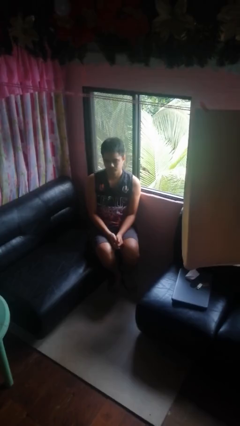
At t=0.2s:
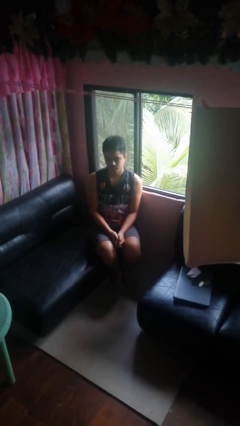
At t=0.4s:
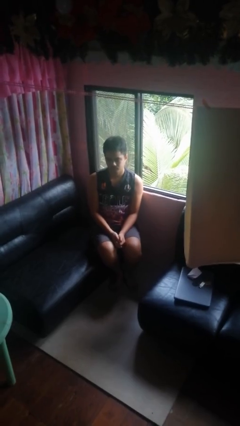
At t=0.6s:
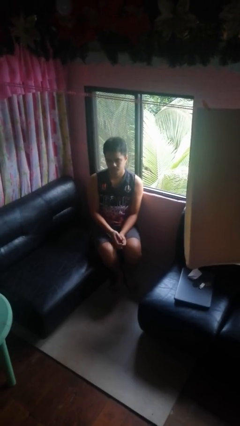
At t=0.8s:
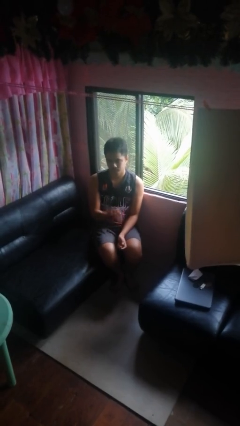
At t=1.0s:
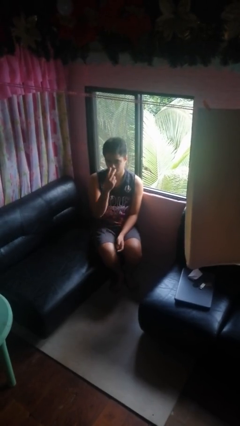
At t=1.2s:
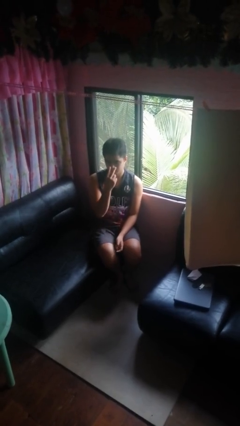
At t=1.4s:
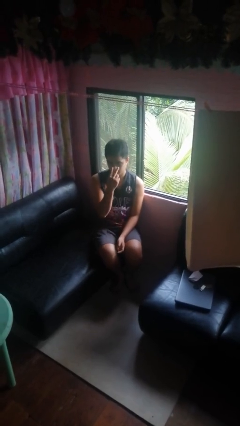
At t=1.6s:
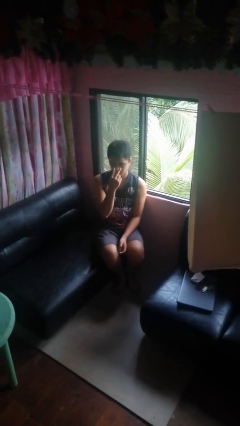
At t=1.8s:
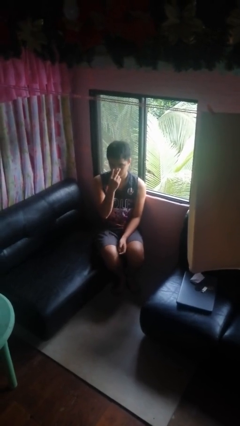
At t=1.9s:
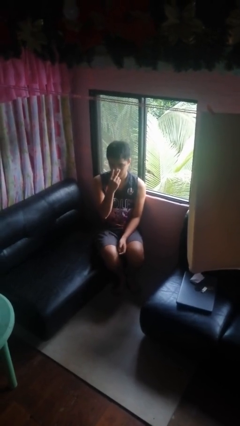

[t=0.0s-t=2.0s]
person gestures watch closely

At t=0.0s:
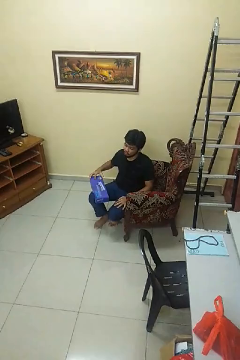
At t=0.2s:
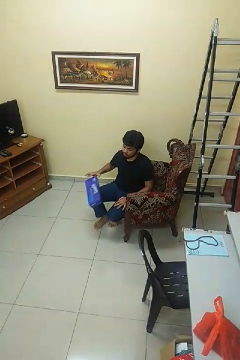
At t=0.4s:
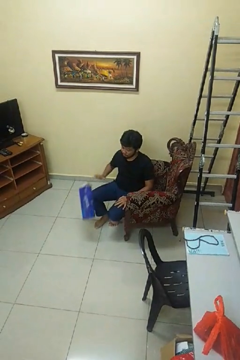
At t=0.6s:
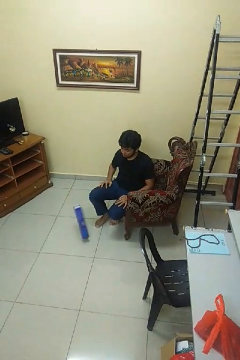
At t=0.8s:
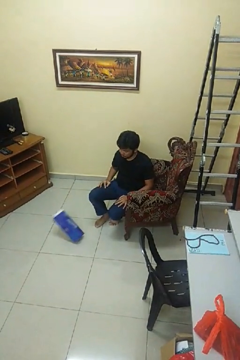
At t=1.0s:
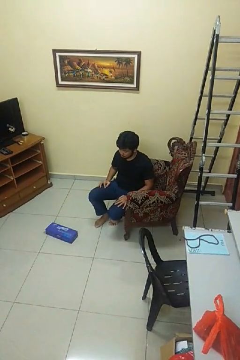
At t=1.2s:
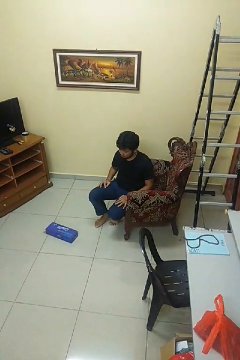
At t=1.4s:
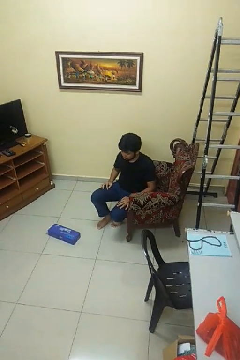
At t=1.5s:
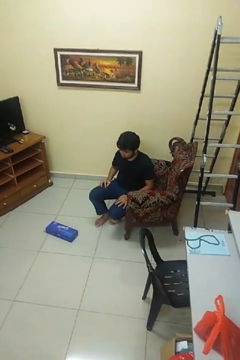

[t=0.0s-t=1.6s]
person drops object

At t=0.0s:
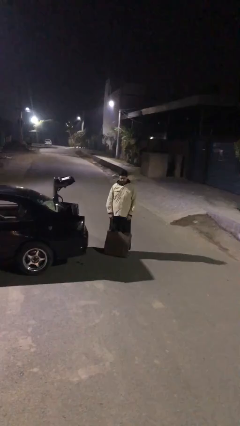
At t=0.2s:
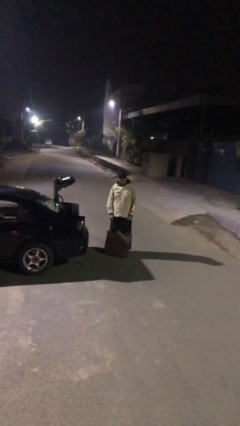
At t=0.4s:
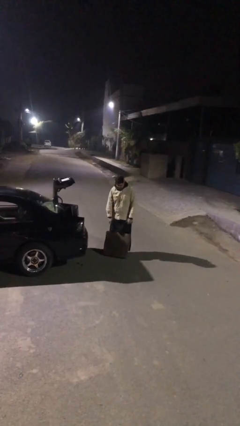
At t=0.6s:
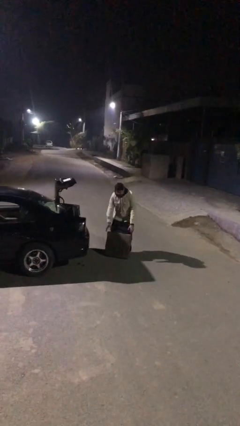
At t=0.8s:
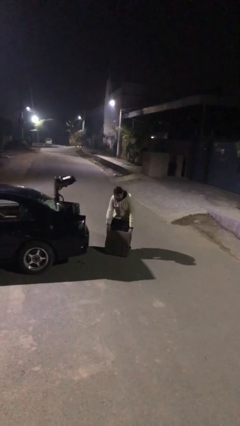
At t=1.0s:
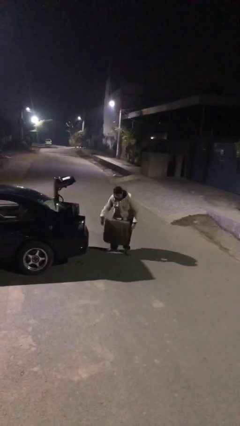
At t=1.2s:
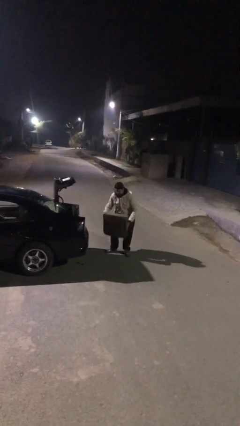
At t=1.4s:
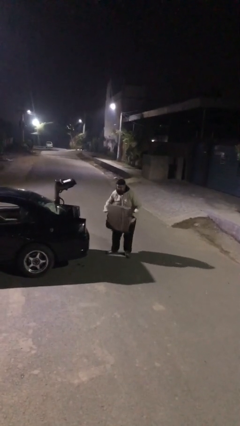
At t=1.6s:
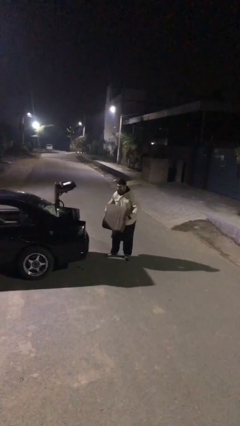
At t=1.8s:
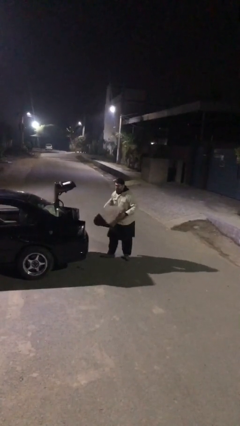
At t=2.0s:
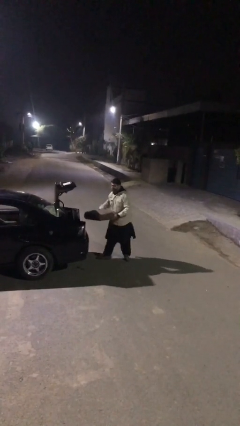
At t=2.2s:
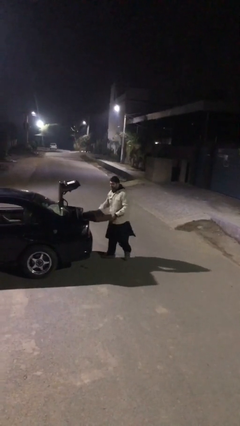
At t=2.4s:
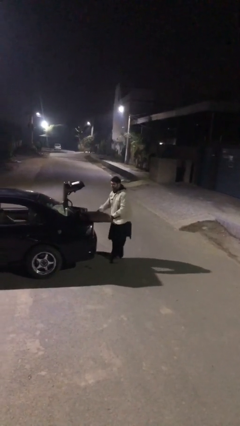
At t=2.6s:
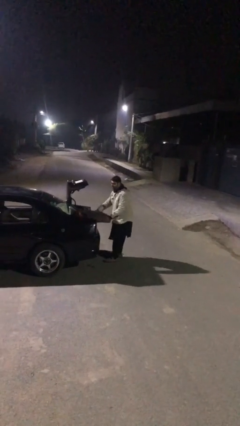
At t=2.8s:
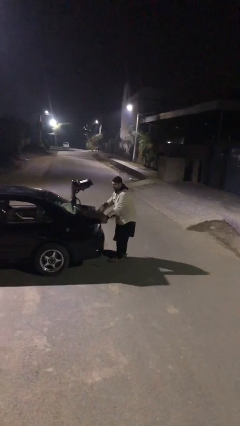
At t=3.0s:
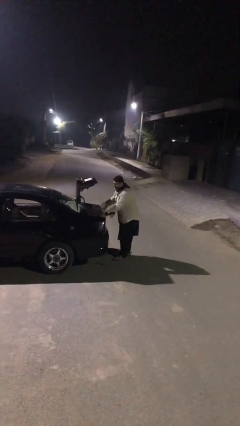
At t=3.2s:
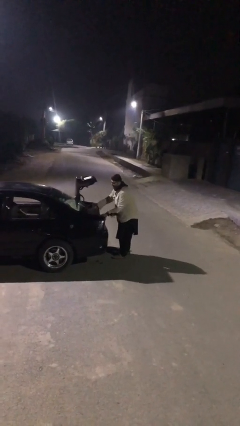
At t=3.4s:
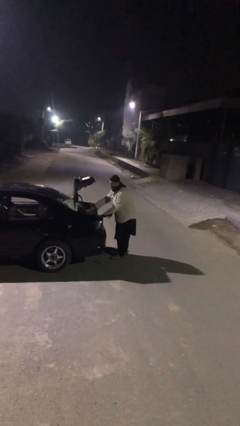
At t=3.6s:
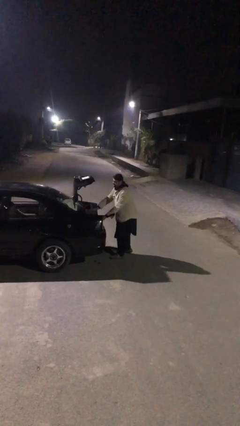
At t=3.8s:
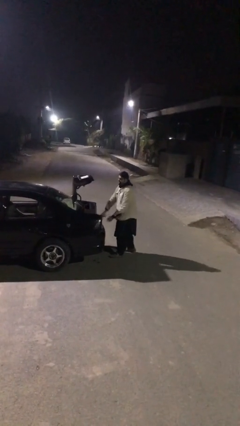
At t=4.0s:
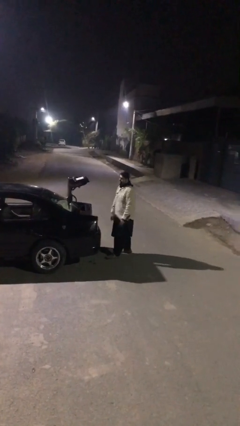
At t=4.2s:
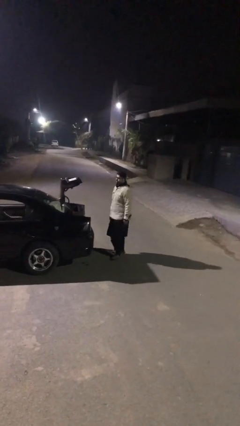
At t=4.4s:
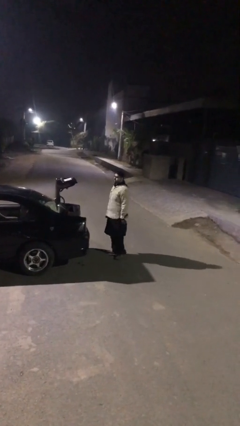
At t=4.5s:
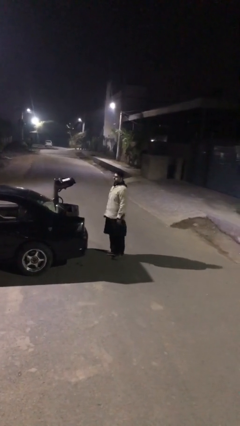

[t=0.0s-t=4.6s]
person loads car

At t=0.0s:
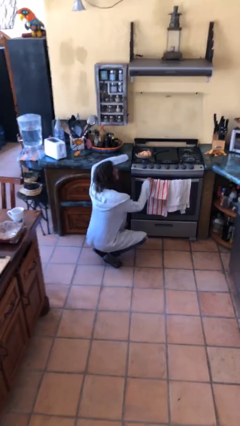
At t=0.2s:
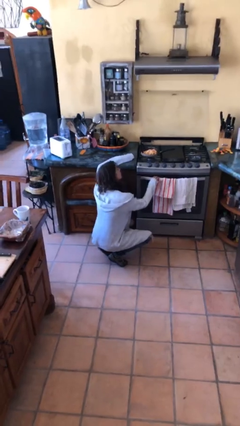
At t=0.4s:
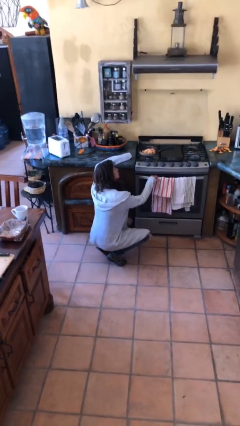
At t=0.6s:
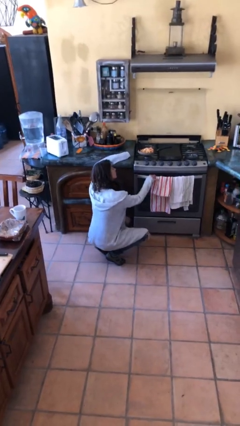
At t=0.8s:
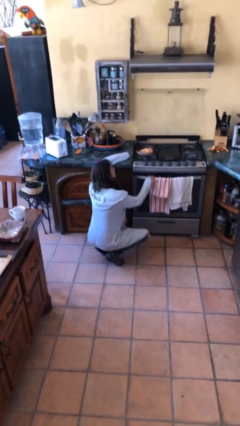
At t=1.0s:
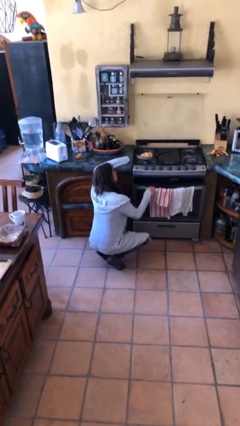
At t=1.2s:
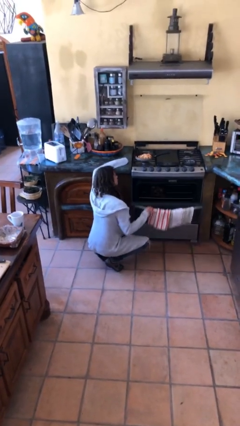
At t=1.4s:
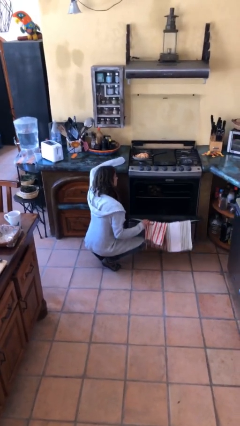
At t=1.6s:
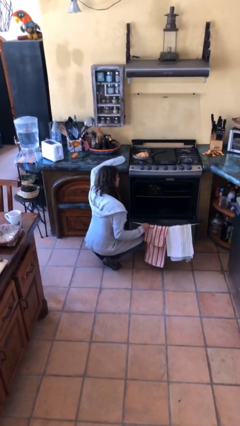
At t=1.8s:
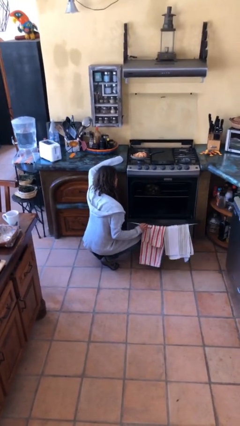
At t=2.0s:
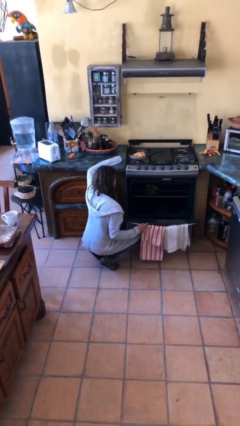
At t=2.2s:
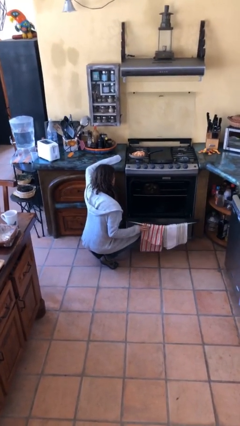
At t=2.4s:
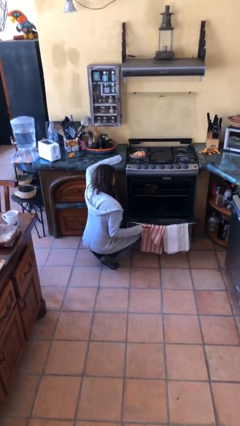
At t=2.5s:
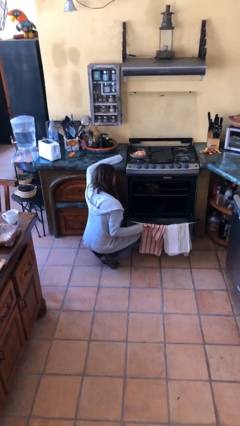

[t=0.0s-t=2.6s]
person opens oven door

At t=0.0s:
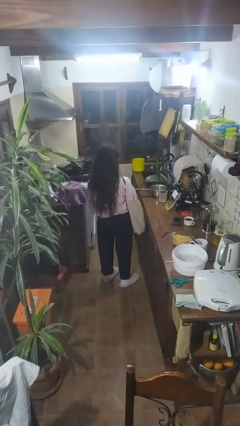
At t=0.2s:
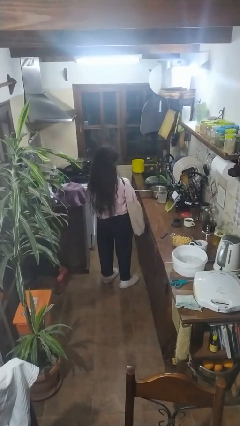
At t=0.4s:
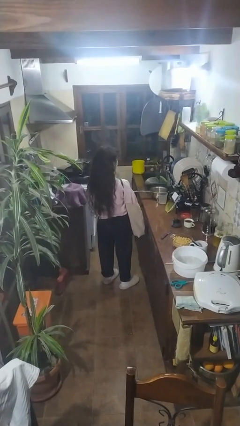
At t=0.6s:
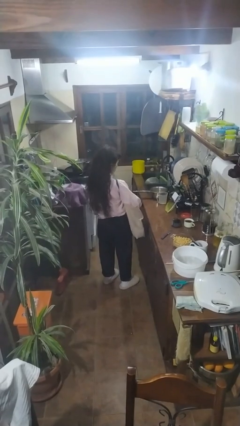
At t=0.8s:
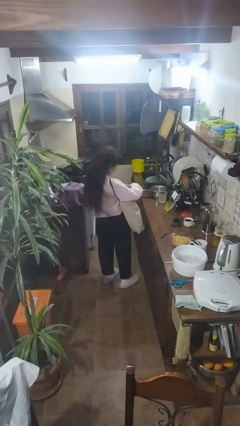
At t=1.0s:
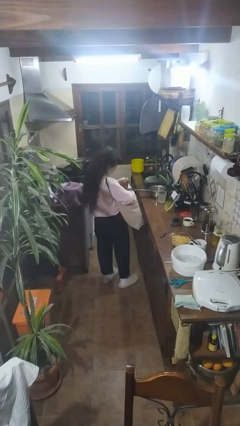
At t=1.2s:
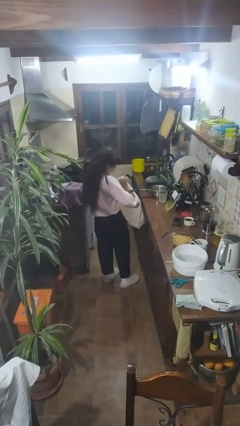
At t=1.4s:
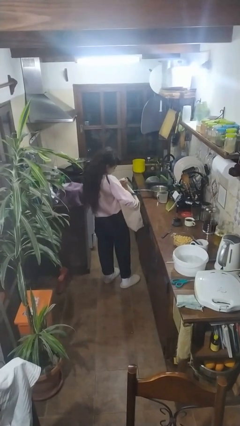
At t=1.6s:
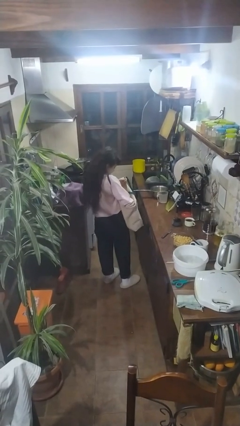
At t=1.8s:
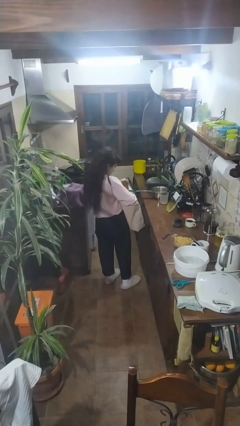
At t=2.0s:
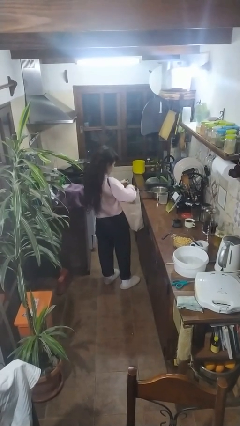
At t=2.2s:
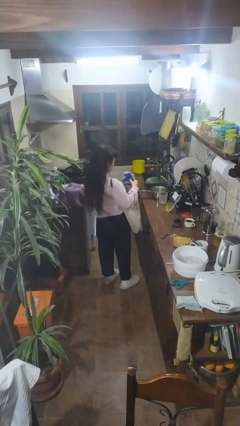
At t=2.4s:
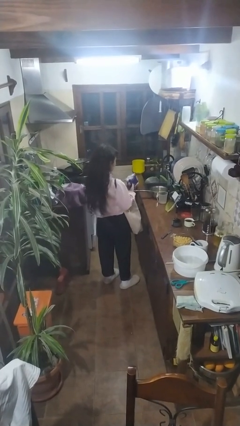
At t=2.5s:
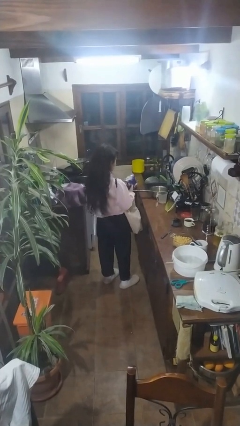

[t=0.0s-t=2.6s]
person takes object from bag

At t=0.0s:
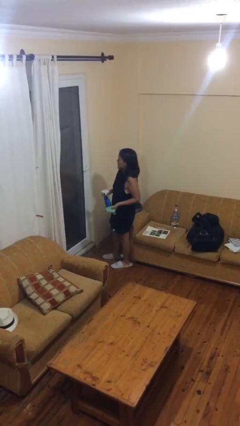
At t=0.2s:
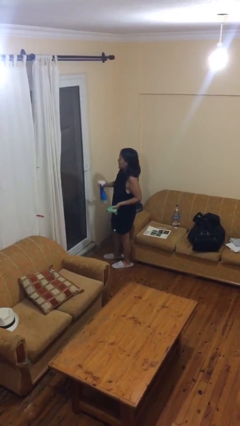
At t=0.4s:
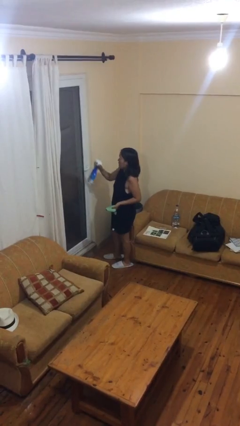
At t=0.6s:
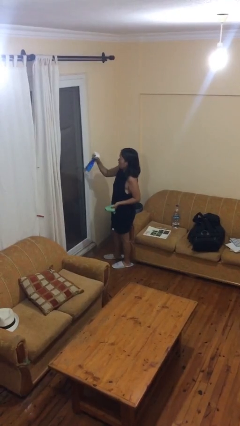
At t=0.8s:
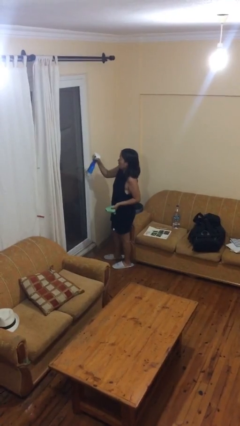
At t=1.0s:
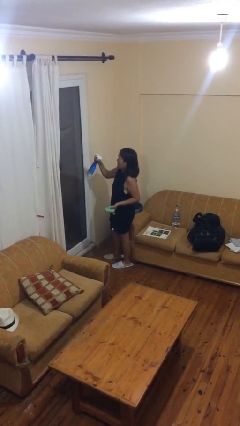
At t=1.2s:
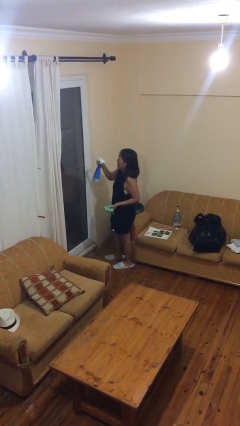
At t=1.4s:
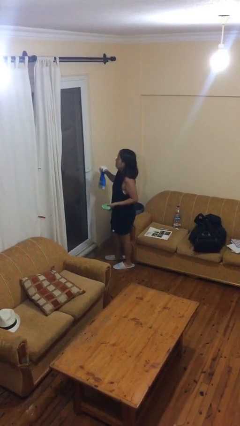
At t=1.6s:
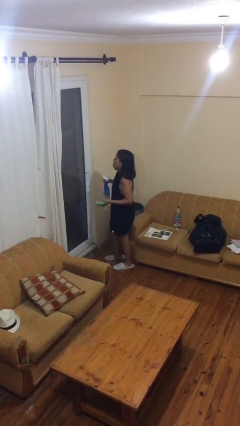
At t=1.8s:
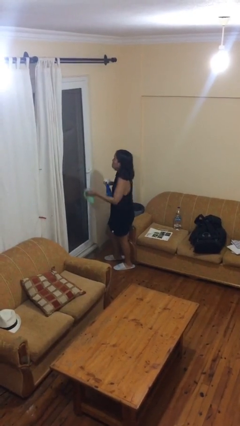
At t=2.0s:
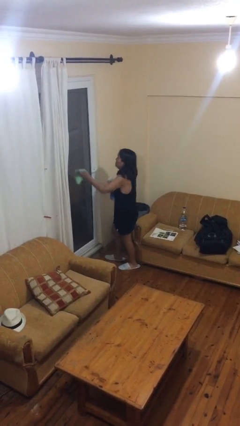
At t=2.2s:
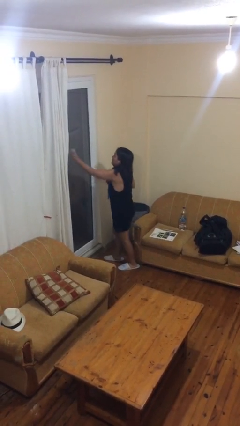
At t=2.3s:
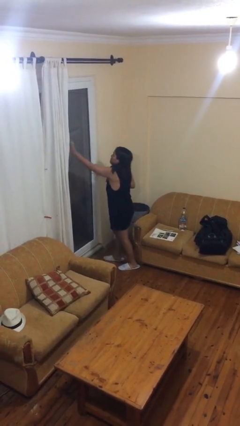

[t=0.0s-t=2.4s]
person sprays from bottle

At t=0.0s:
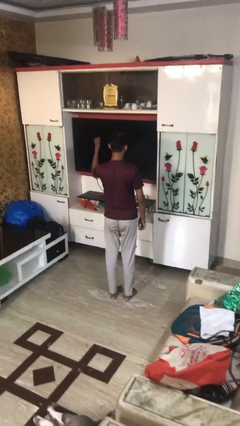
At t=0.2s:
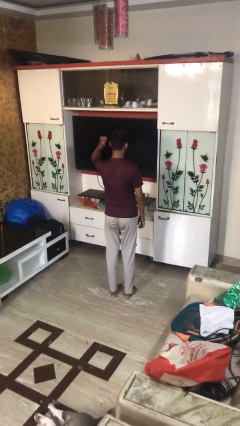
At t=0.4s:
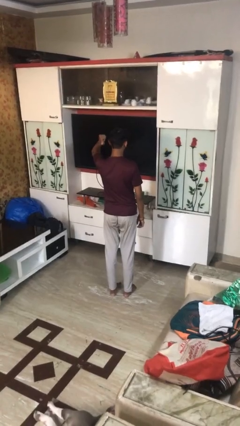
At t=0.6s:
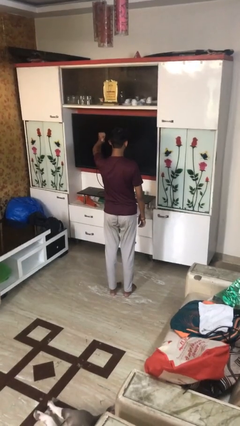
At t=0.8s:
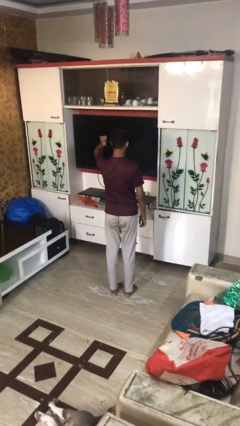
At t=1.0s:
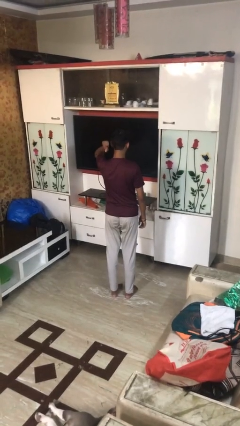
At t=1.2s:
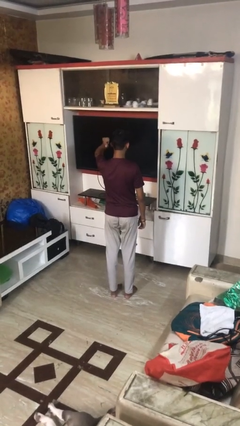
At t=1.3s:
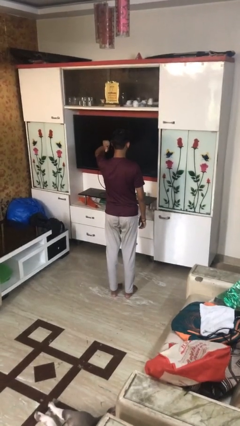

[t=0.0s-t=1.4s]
person gestures behind me
